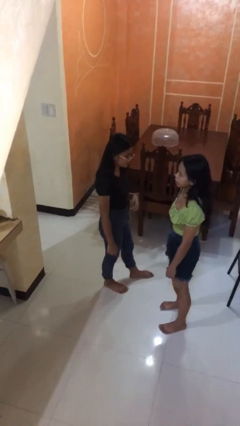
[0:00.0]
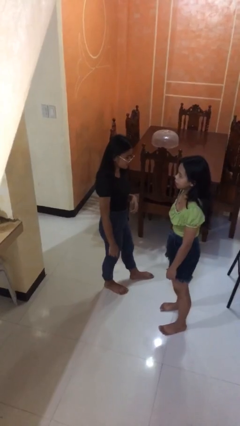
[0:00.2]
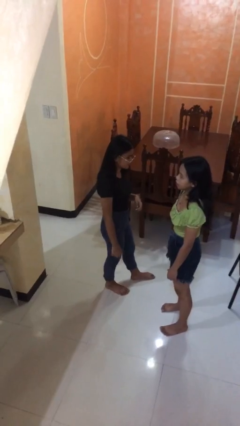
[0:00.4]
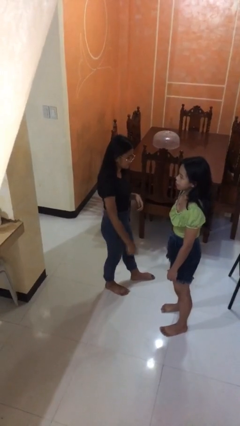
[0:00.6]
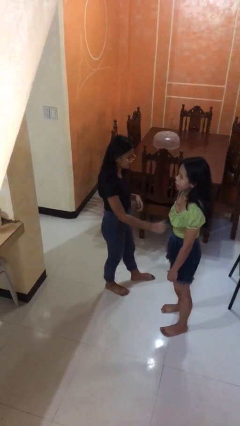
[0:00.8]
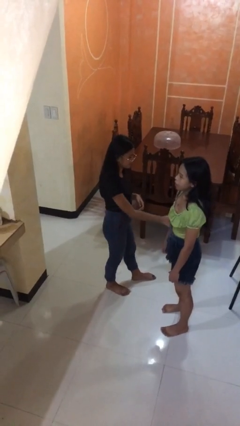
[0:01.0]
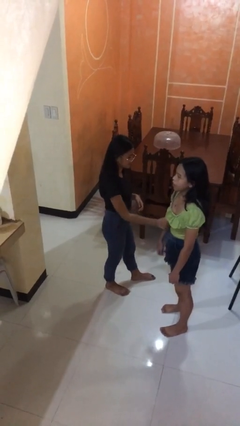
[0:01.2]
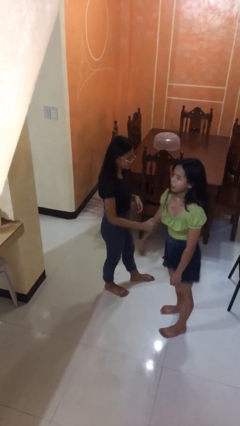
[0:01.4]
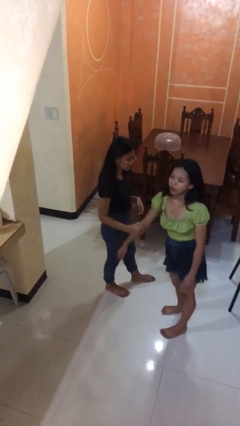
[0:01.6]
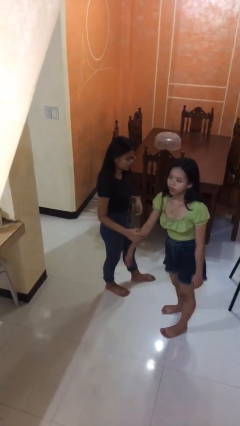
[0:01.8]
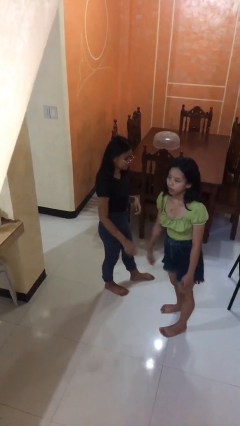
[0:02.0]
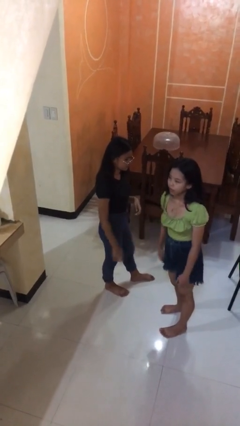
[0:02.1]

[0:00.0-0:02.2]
person grabs person by forearm

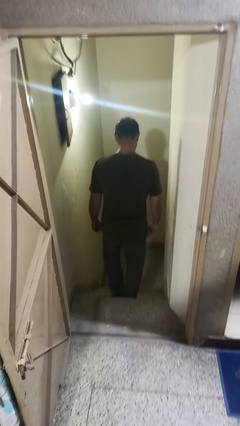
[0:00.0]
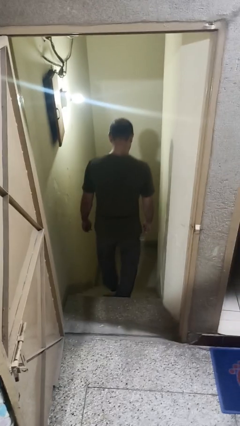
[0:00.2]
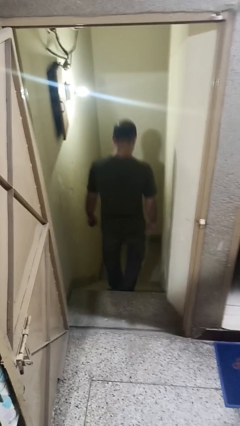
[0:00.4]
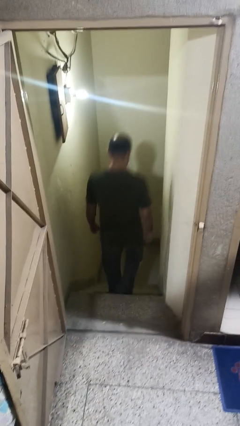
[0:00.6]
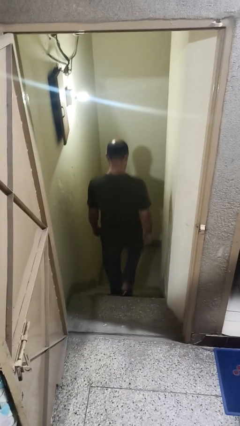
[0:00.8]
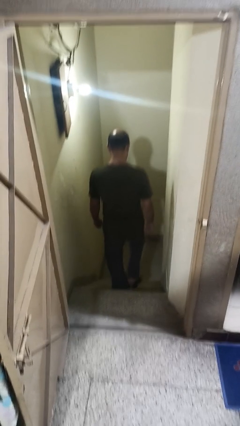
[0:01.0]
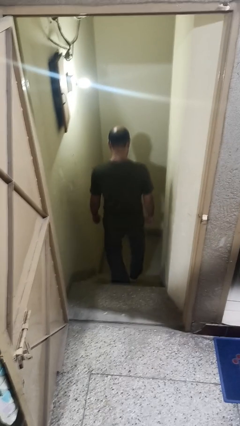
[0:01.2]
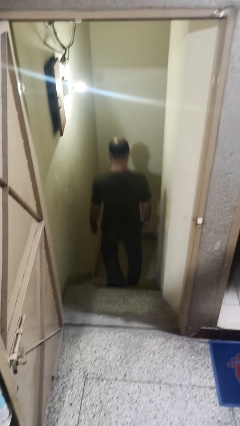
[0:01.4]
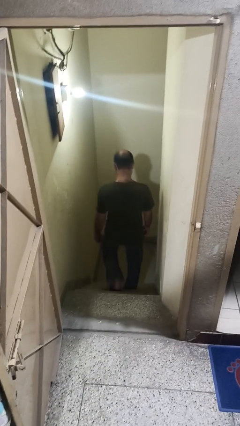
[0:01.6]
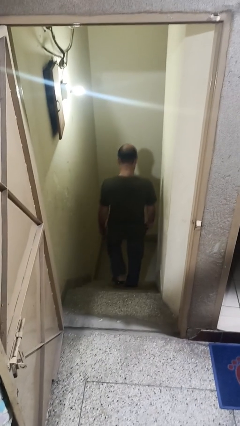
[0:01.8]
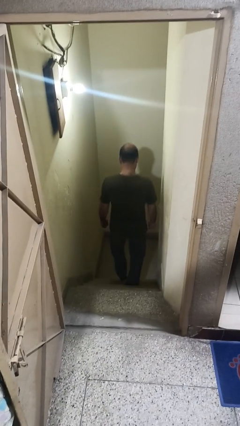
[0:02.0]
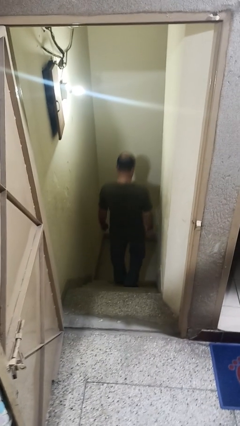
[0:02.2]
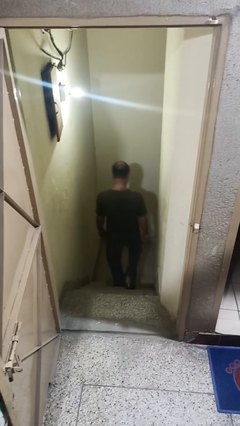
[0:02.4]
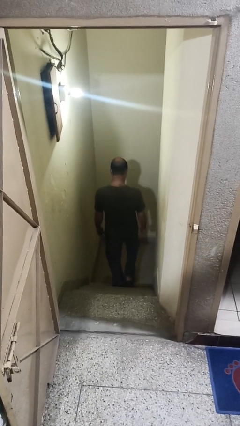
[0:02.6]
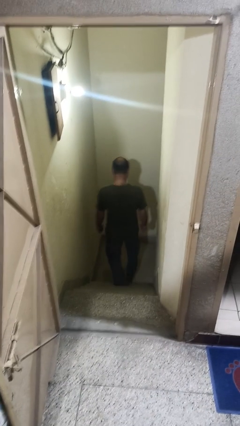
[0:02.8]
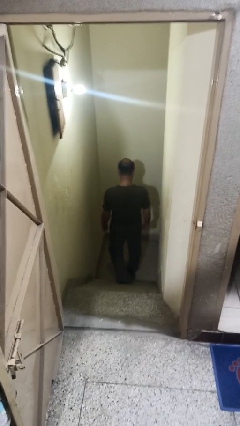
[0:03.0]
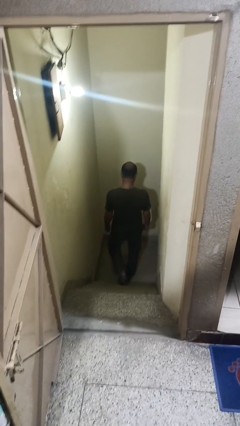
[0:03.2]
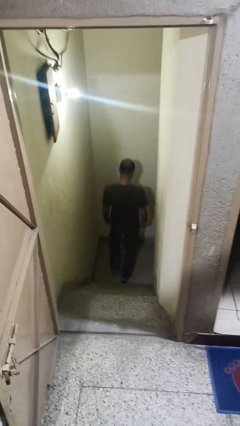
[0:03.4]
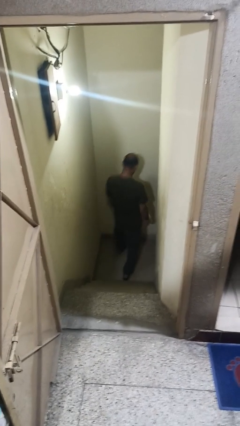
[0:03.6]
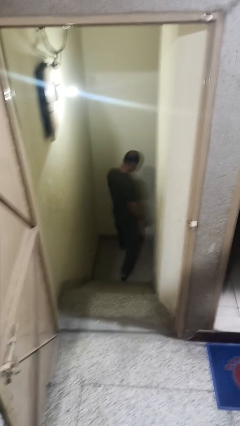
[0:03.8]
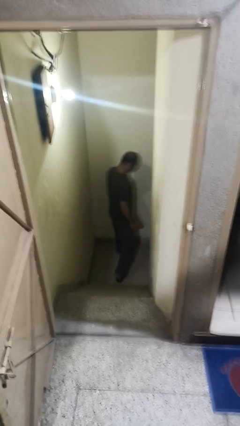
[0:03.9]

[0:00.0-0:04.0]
person climbs down stairs

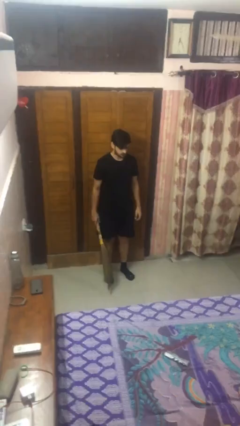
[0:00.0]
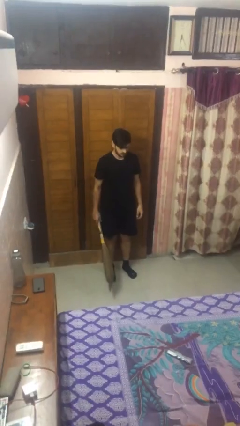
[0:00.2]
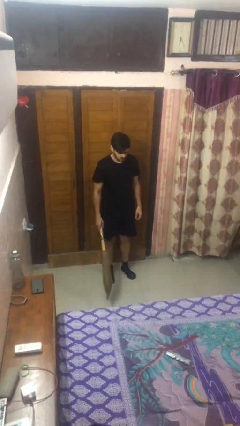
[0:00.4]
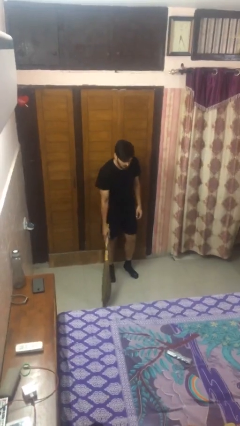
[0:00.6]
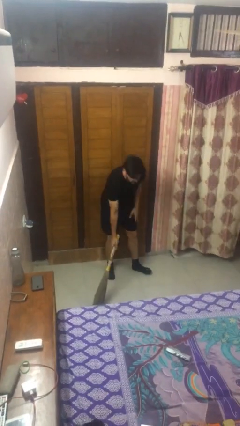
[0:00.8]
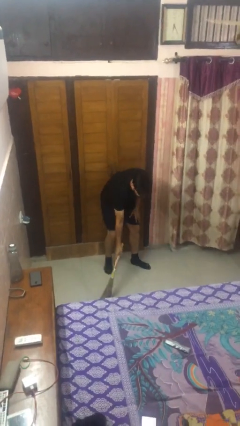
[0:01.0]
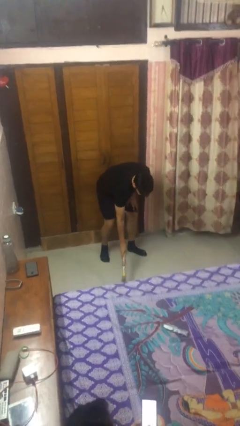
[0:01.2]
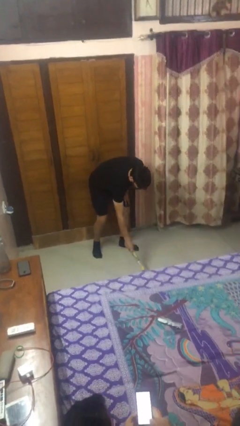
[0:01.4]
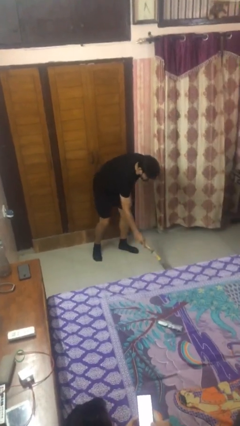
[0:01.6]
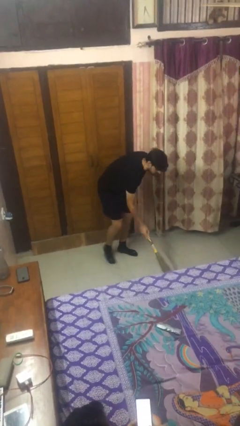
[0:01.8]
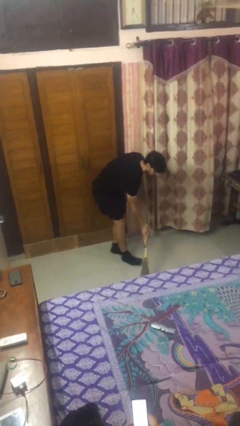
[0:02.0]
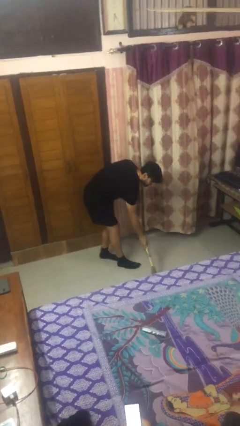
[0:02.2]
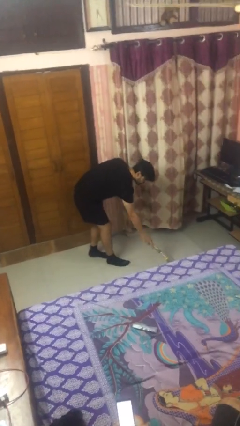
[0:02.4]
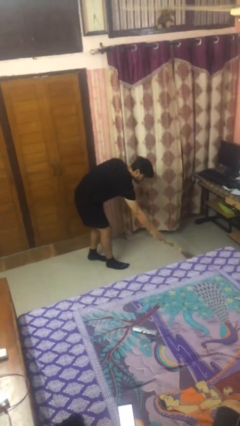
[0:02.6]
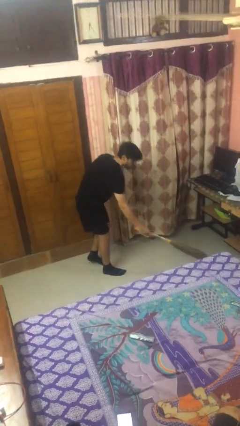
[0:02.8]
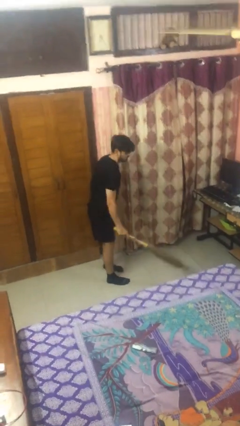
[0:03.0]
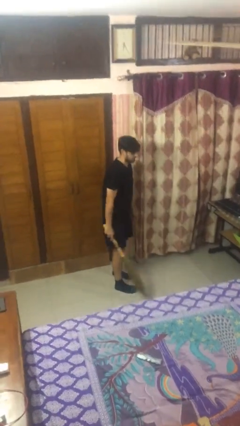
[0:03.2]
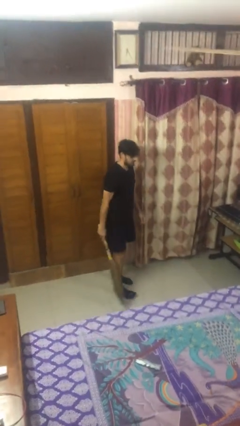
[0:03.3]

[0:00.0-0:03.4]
person sweeps floor

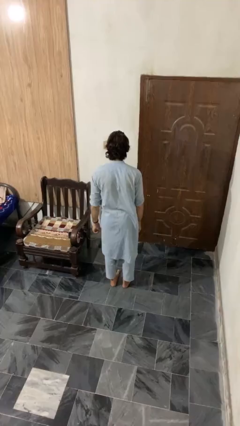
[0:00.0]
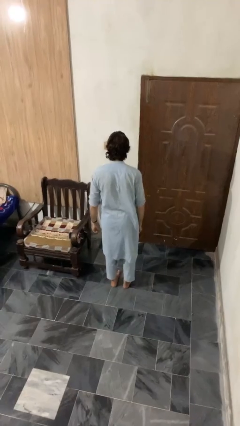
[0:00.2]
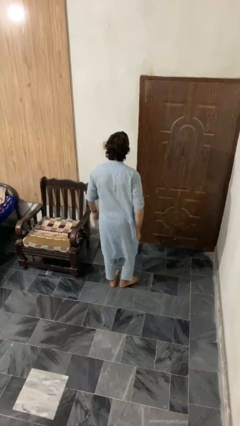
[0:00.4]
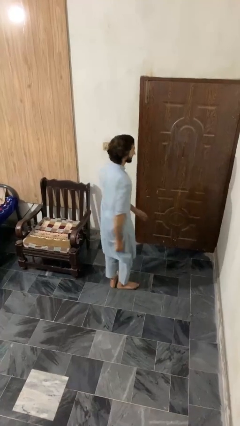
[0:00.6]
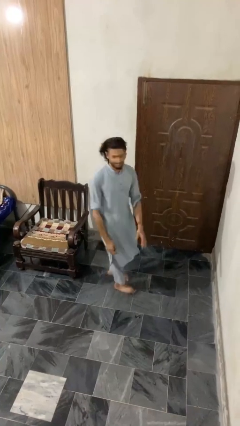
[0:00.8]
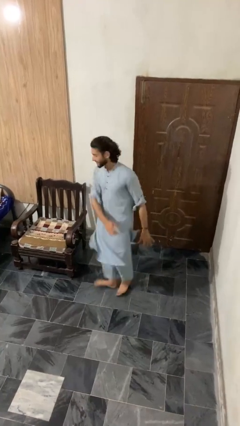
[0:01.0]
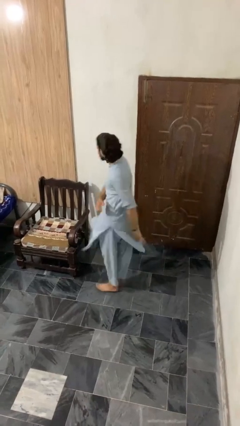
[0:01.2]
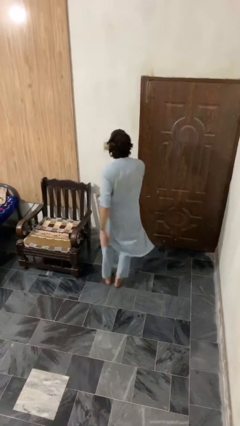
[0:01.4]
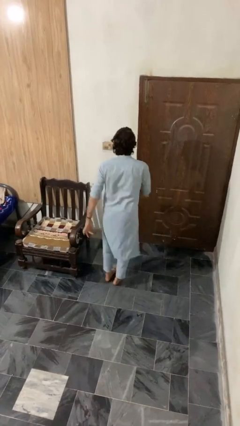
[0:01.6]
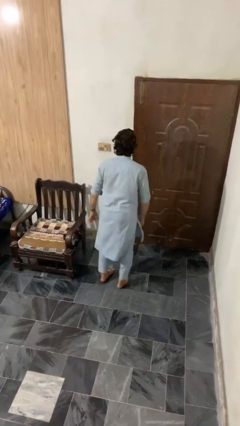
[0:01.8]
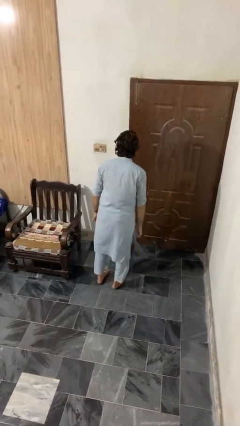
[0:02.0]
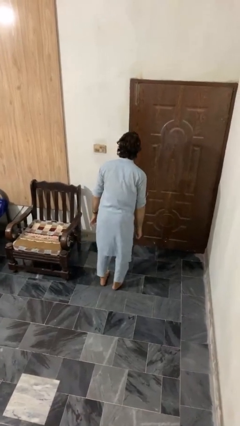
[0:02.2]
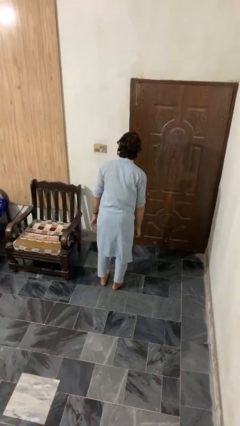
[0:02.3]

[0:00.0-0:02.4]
person twirls

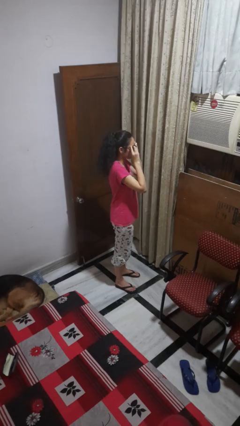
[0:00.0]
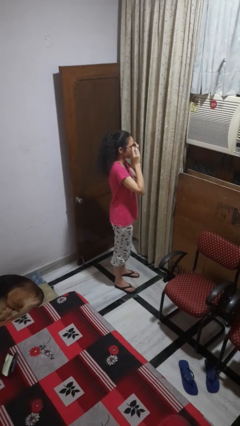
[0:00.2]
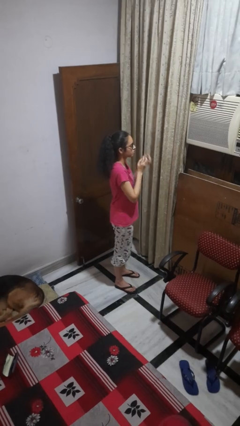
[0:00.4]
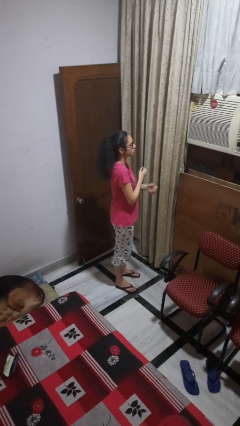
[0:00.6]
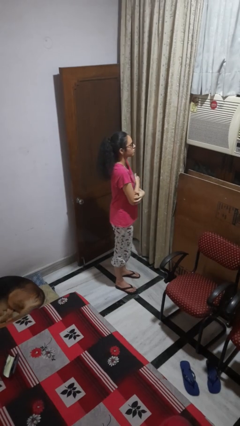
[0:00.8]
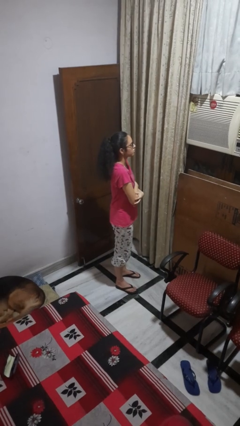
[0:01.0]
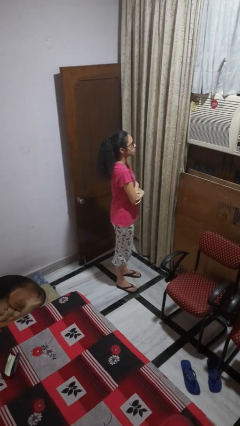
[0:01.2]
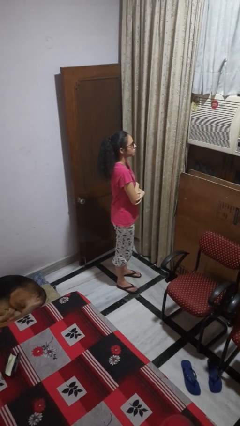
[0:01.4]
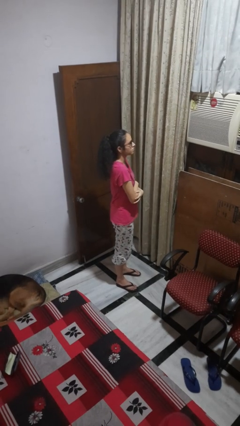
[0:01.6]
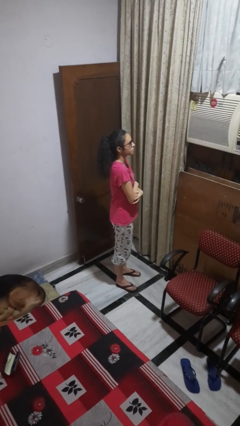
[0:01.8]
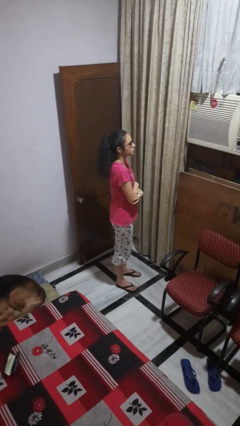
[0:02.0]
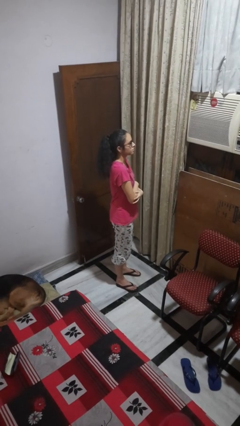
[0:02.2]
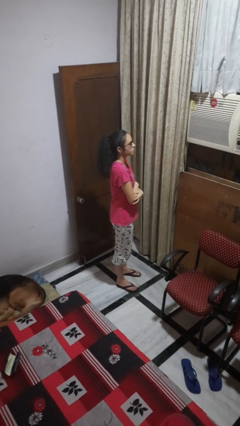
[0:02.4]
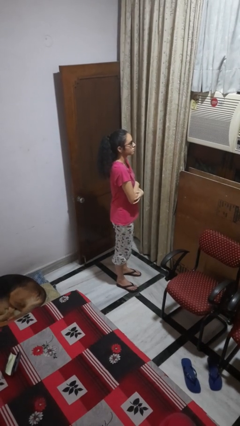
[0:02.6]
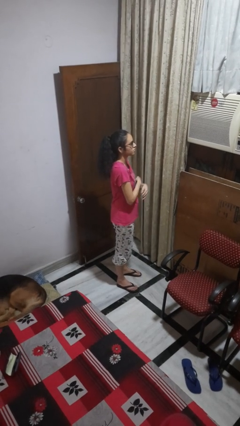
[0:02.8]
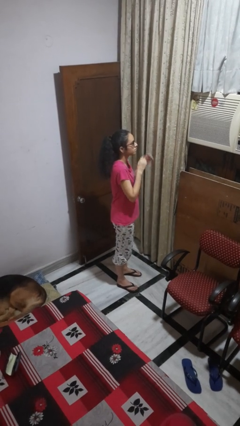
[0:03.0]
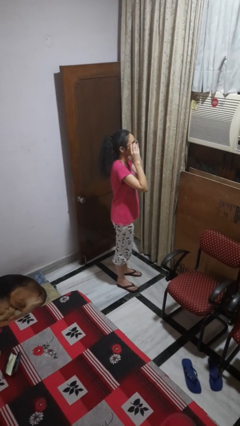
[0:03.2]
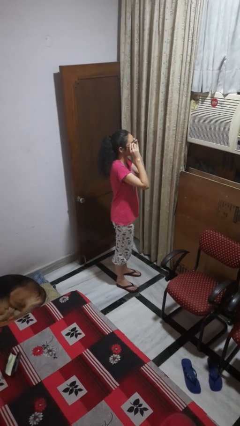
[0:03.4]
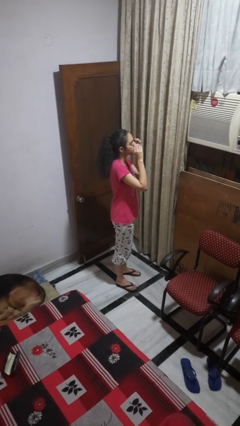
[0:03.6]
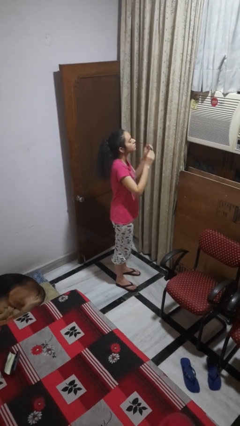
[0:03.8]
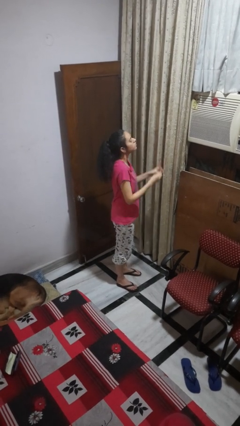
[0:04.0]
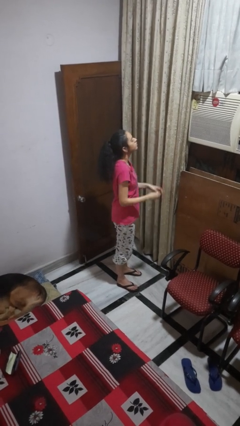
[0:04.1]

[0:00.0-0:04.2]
person puts on glasses

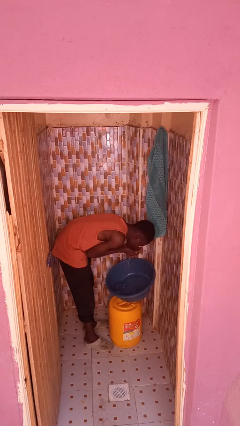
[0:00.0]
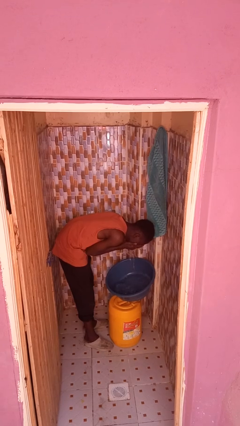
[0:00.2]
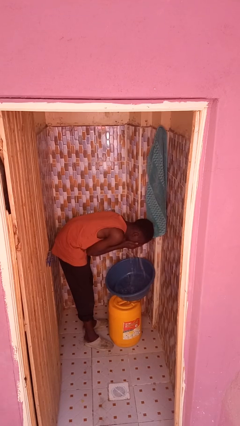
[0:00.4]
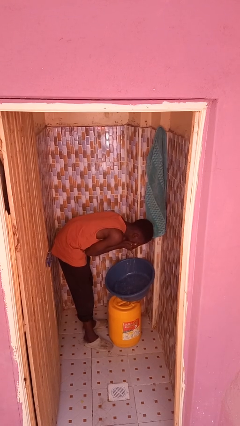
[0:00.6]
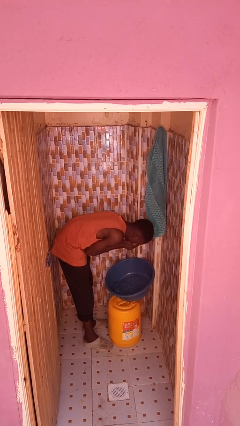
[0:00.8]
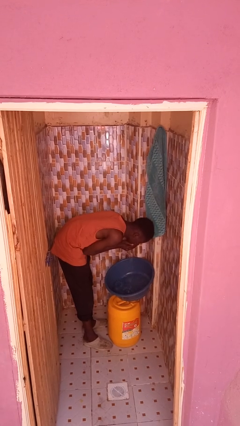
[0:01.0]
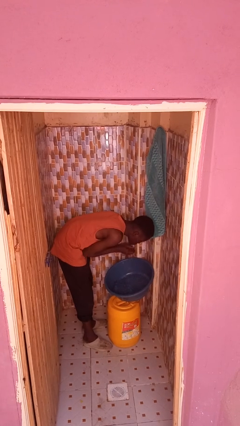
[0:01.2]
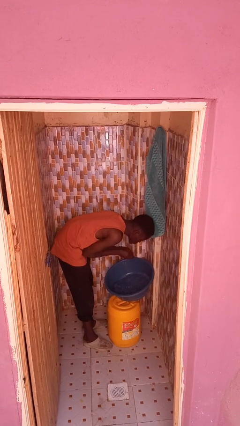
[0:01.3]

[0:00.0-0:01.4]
person washes face
